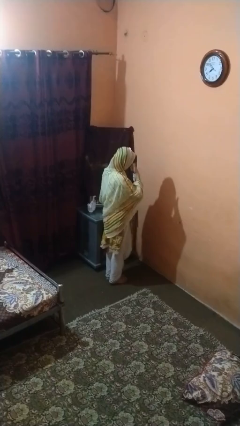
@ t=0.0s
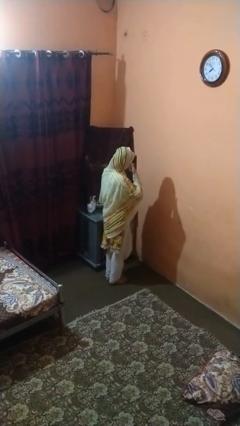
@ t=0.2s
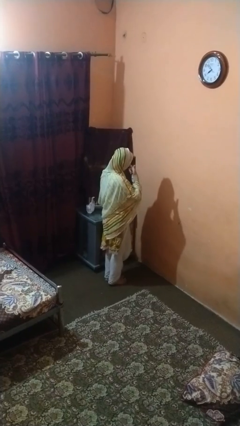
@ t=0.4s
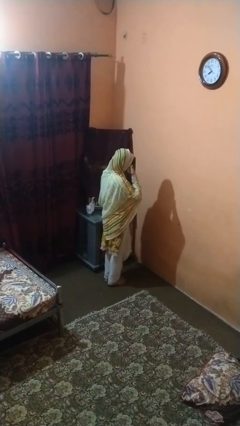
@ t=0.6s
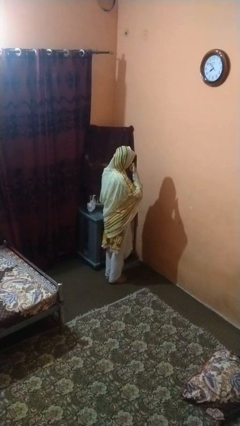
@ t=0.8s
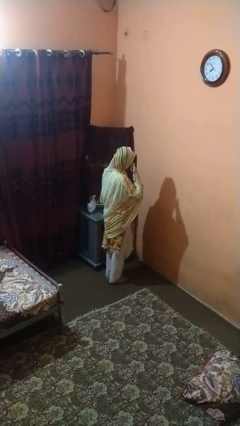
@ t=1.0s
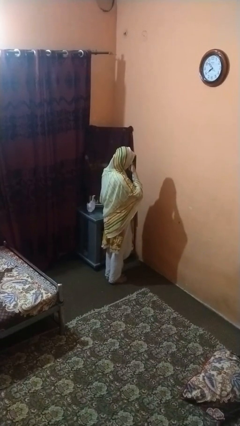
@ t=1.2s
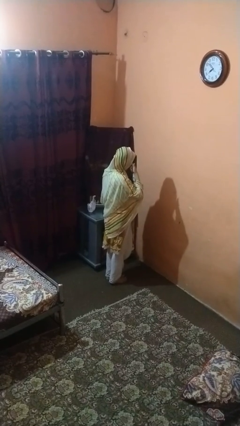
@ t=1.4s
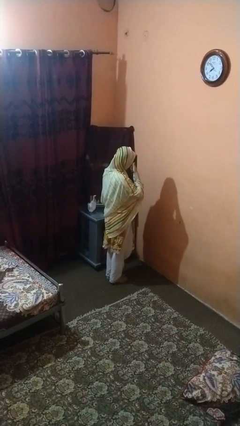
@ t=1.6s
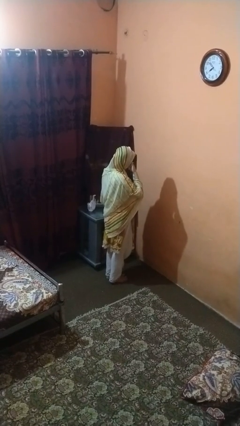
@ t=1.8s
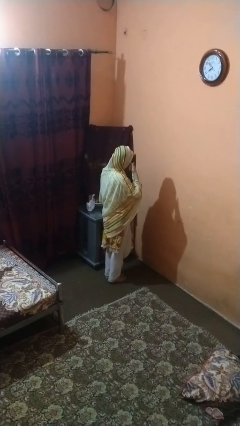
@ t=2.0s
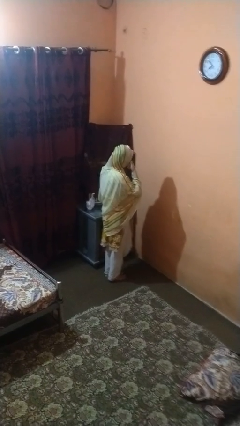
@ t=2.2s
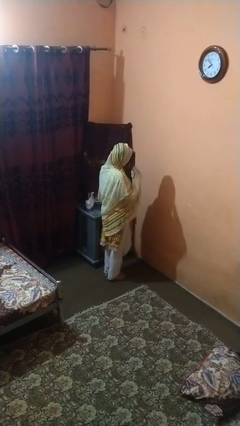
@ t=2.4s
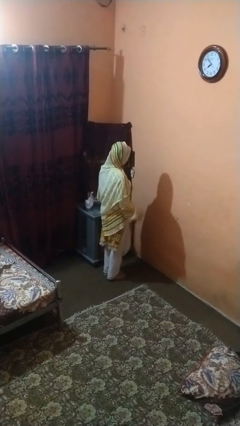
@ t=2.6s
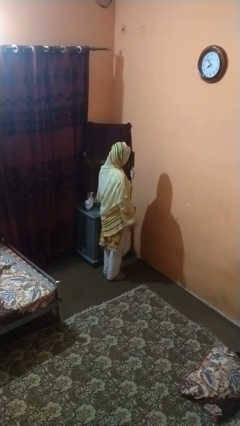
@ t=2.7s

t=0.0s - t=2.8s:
person rubs eyes

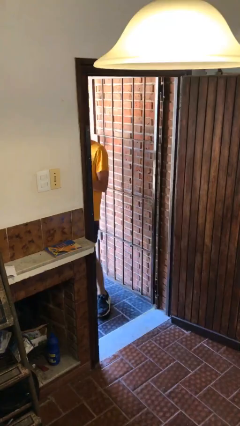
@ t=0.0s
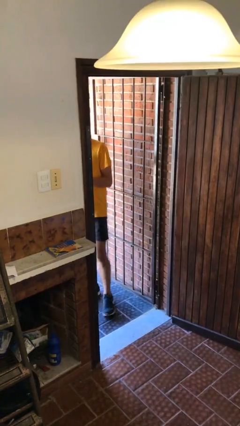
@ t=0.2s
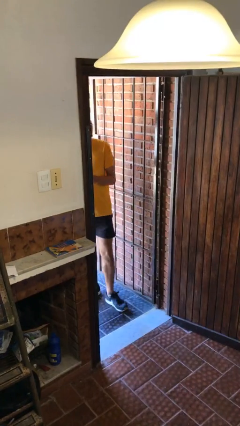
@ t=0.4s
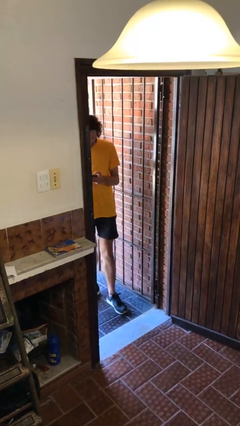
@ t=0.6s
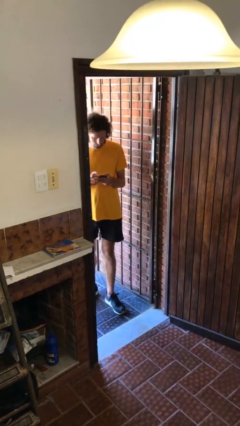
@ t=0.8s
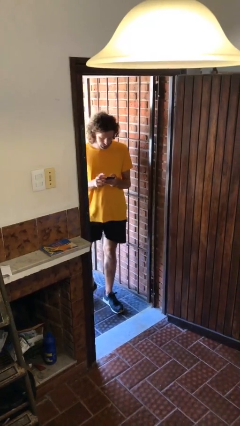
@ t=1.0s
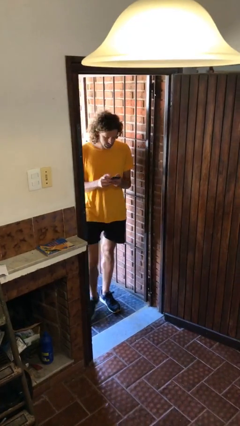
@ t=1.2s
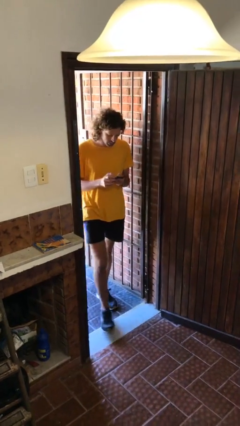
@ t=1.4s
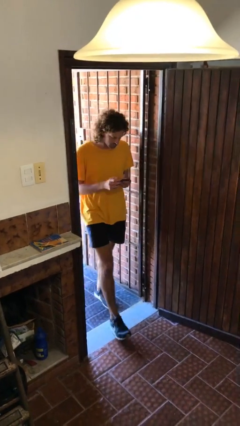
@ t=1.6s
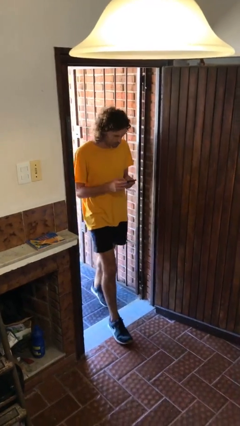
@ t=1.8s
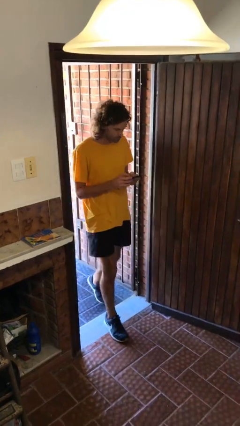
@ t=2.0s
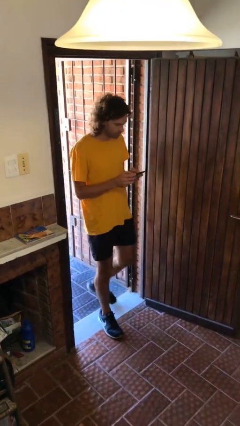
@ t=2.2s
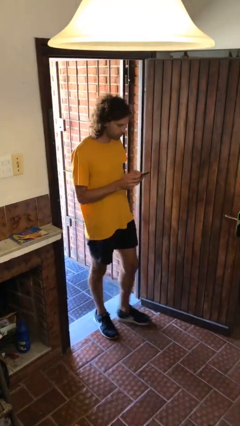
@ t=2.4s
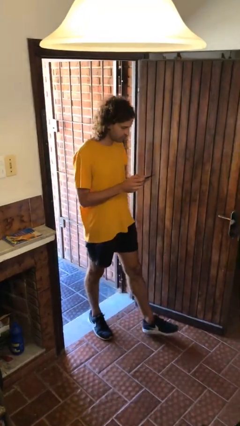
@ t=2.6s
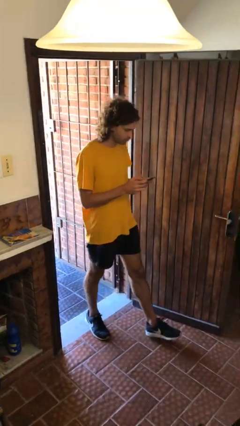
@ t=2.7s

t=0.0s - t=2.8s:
person enters scene through structure

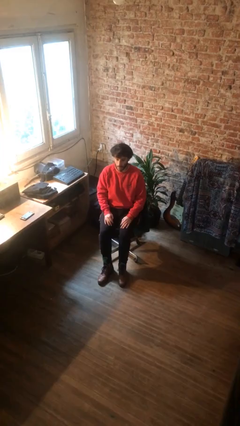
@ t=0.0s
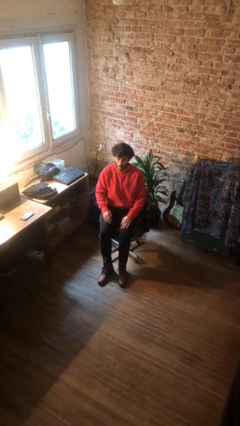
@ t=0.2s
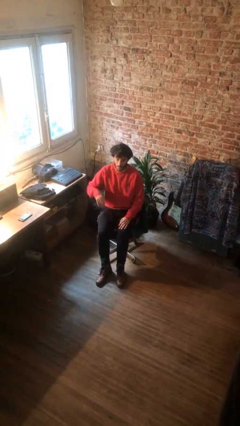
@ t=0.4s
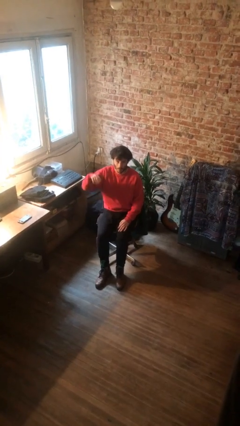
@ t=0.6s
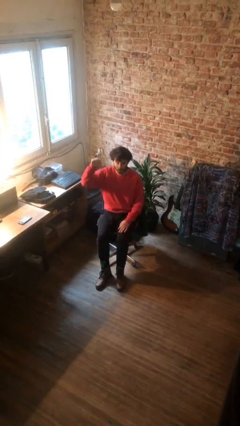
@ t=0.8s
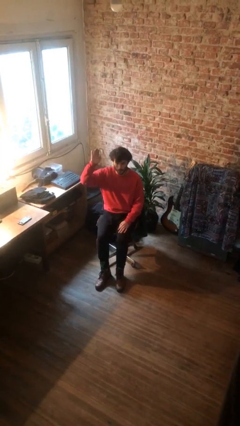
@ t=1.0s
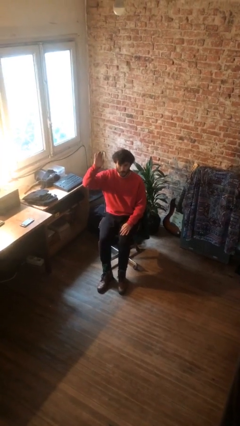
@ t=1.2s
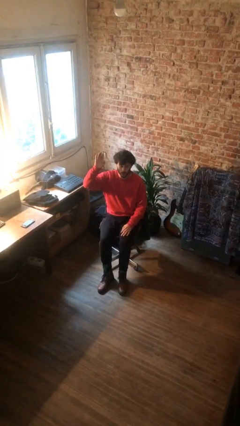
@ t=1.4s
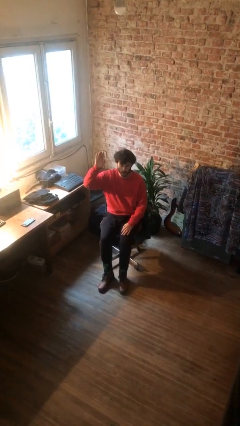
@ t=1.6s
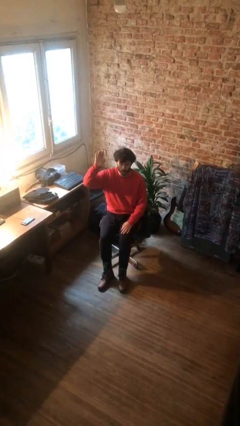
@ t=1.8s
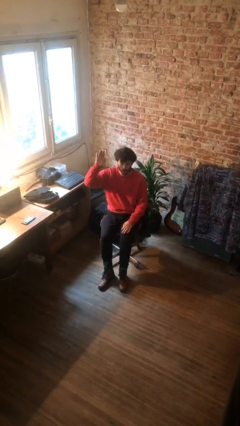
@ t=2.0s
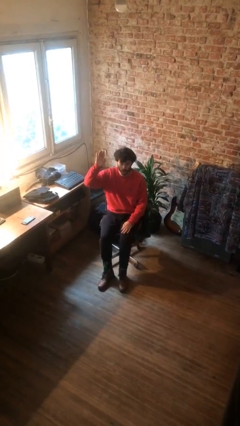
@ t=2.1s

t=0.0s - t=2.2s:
person gestures raise hand

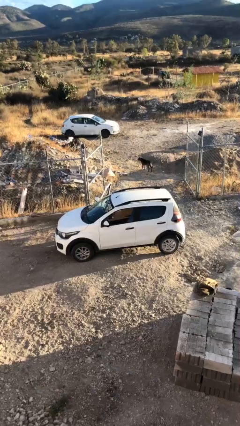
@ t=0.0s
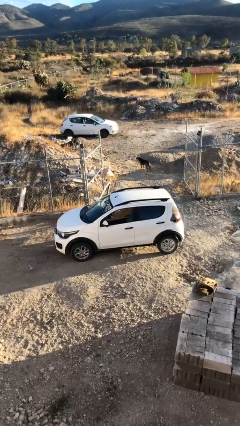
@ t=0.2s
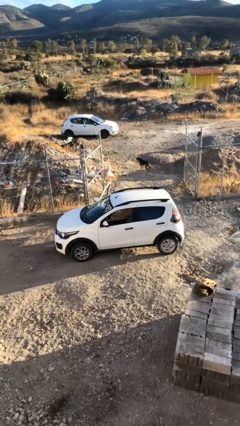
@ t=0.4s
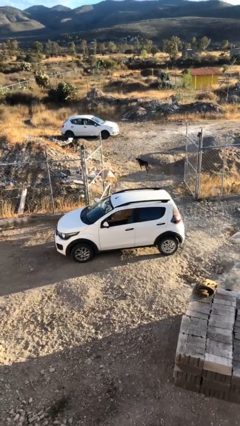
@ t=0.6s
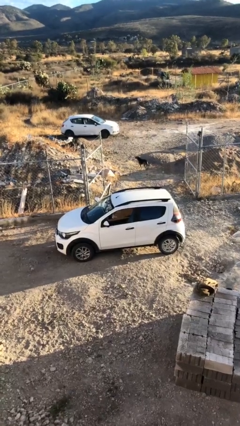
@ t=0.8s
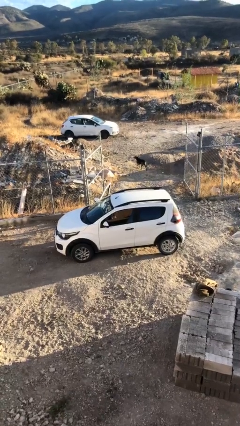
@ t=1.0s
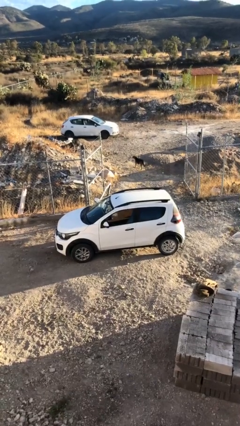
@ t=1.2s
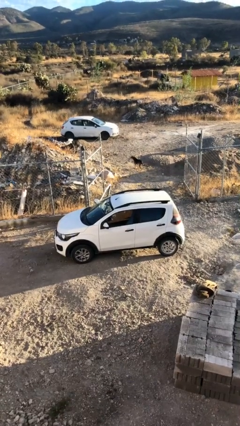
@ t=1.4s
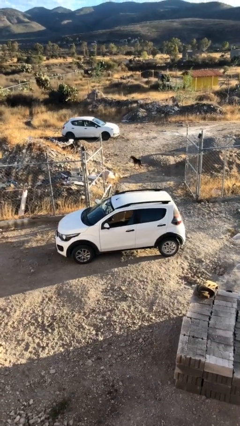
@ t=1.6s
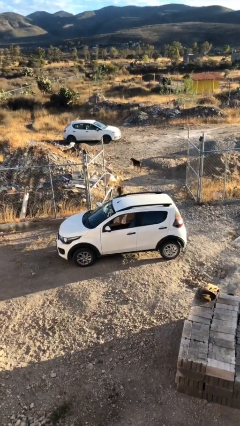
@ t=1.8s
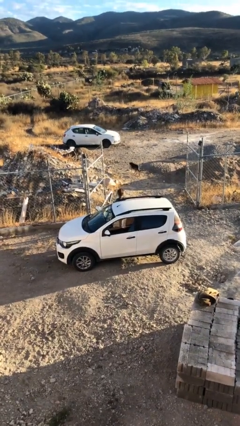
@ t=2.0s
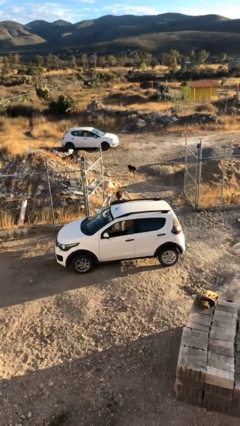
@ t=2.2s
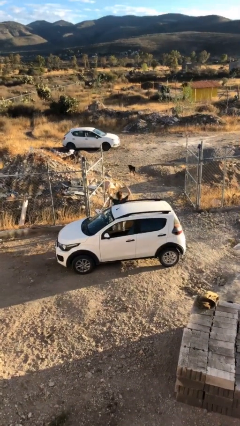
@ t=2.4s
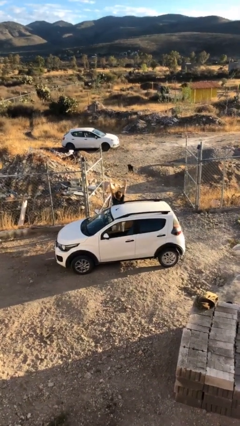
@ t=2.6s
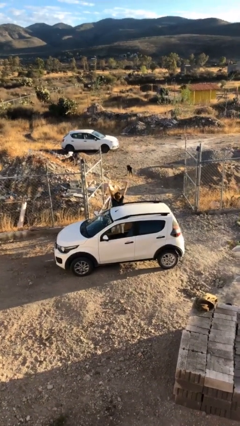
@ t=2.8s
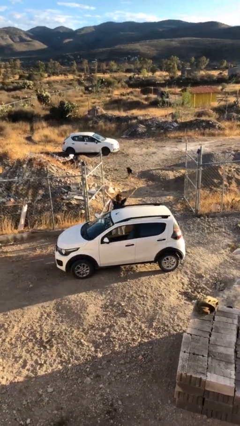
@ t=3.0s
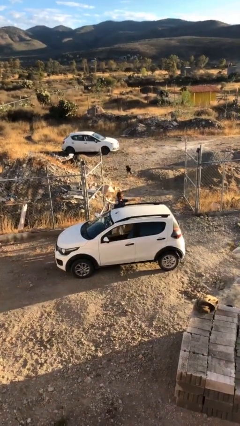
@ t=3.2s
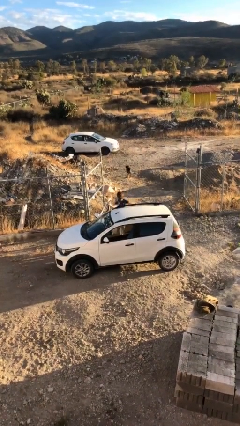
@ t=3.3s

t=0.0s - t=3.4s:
person exits car

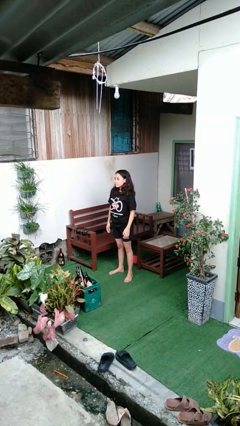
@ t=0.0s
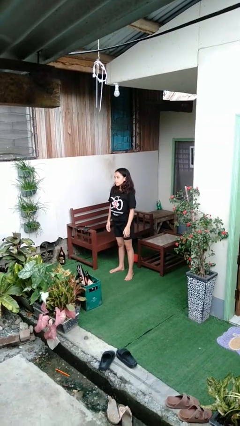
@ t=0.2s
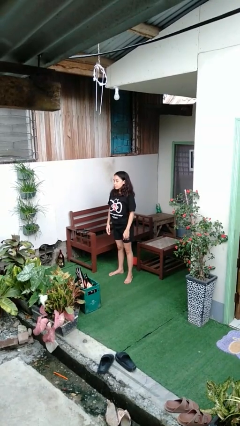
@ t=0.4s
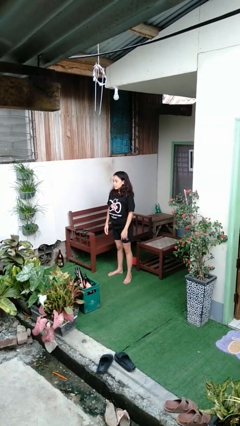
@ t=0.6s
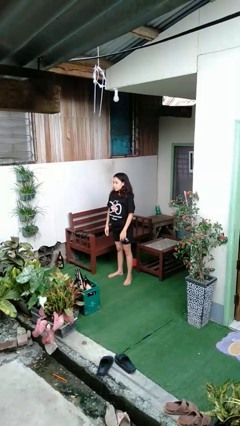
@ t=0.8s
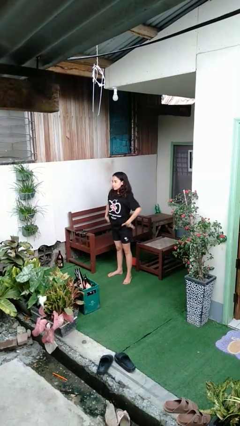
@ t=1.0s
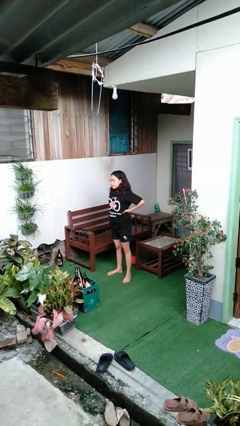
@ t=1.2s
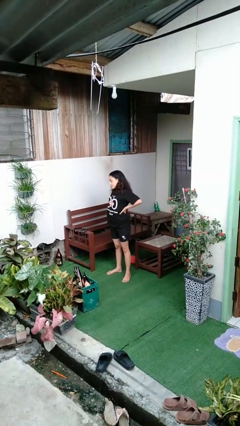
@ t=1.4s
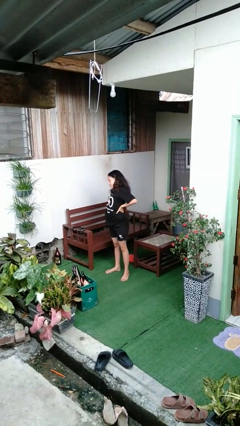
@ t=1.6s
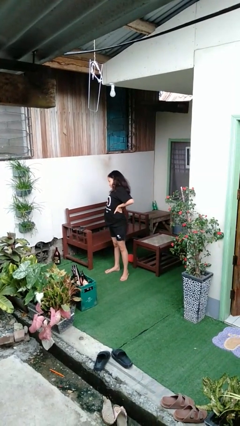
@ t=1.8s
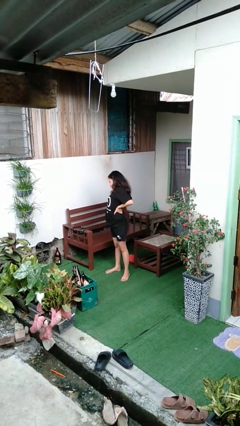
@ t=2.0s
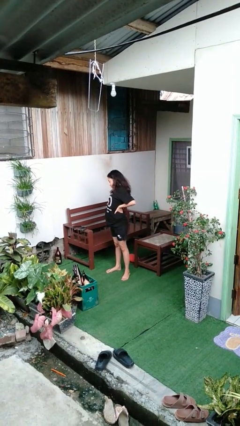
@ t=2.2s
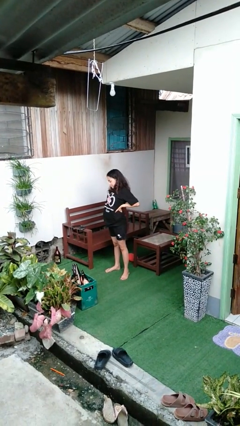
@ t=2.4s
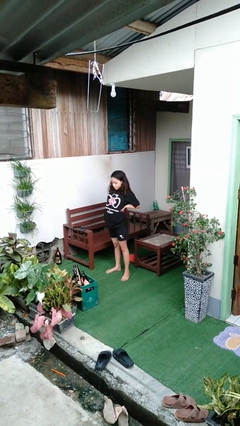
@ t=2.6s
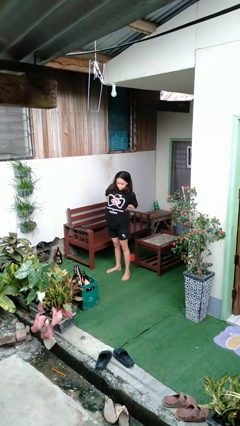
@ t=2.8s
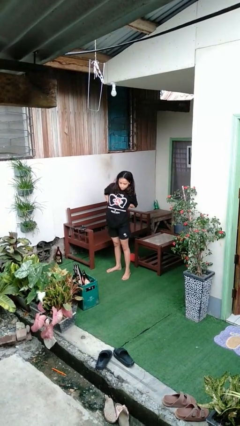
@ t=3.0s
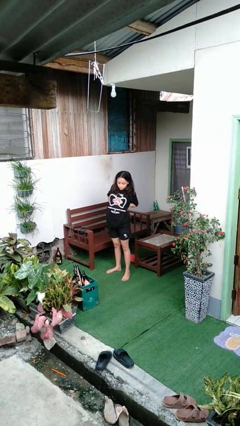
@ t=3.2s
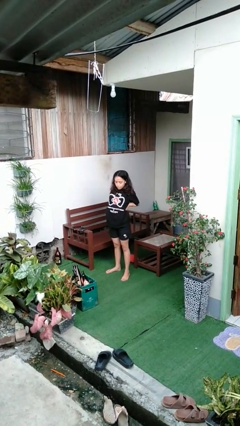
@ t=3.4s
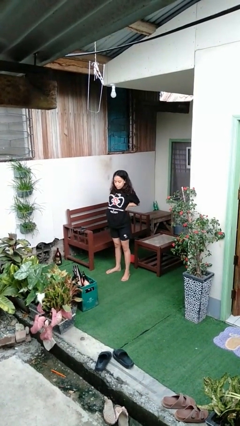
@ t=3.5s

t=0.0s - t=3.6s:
person stretches back

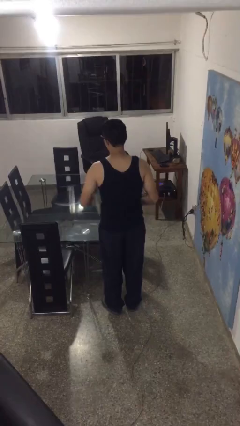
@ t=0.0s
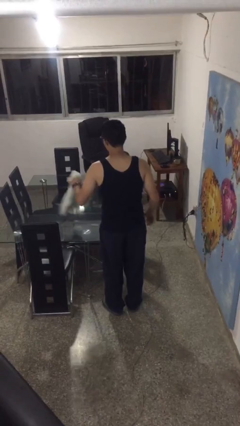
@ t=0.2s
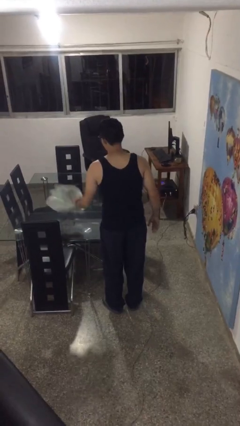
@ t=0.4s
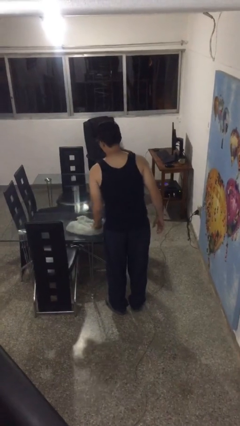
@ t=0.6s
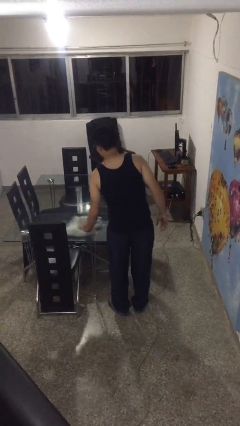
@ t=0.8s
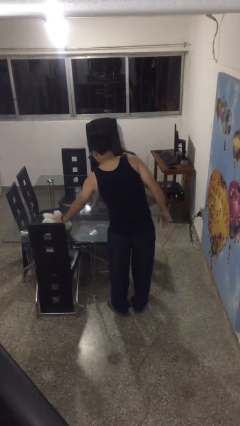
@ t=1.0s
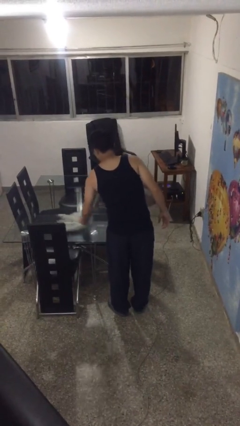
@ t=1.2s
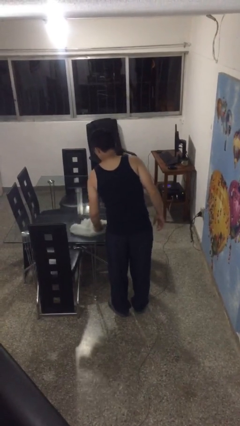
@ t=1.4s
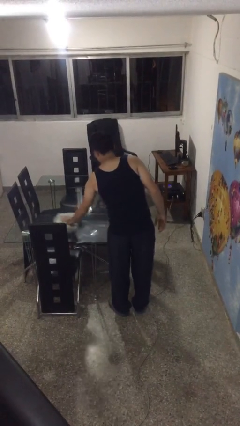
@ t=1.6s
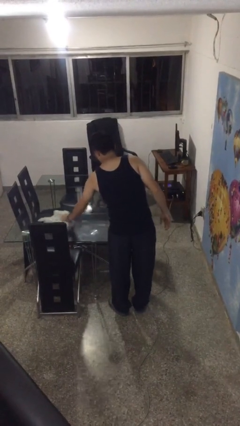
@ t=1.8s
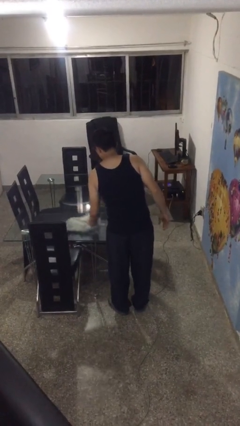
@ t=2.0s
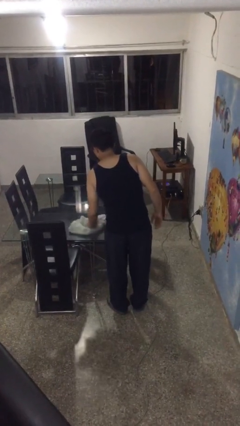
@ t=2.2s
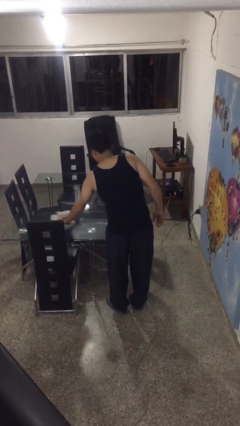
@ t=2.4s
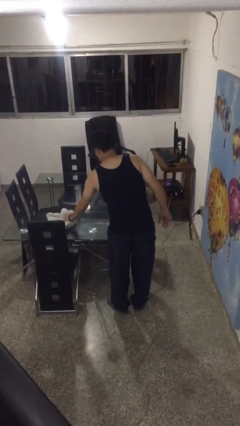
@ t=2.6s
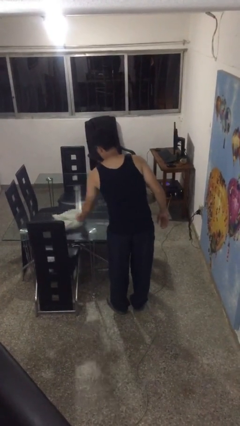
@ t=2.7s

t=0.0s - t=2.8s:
person cleans table with rag
